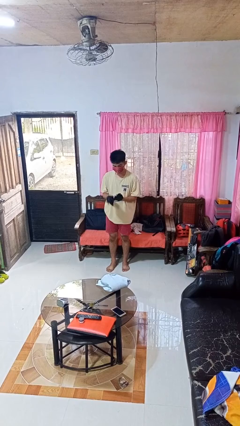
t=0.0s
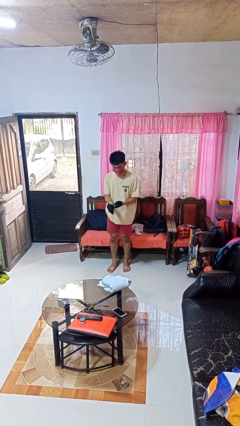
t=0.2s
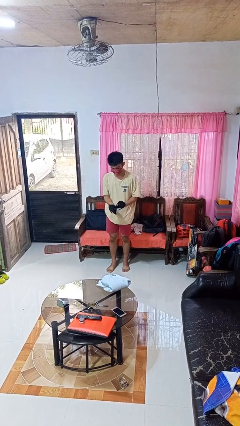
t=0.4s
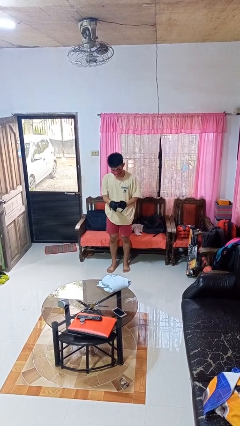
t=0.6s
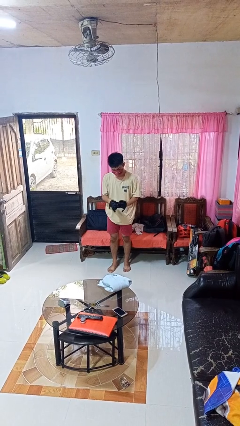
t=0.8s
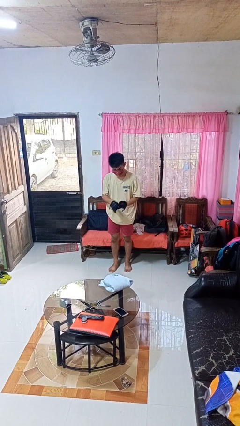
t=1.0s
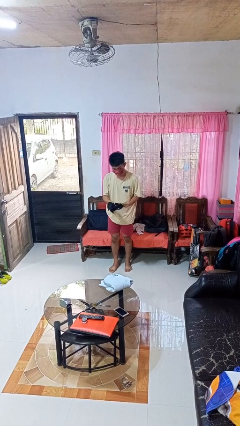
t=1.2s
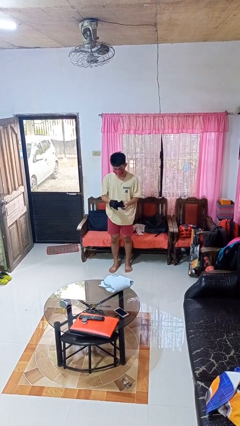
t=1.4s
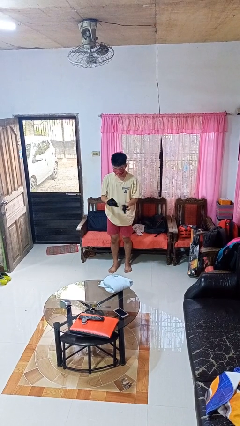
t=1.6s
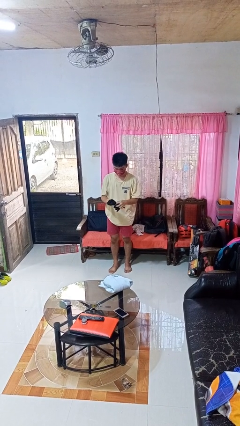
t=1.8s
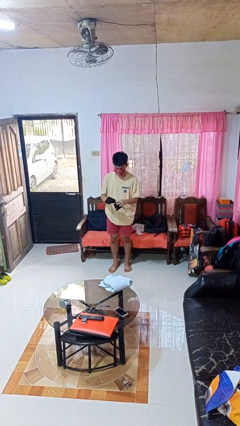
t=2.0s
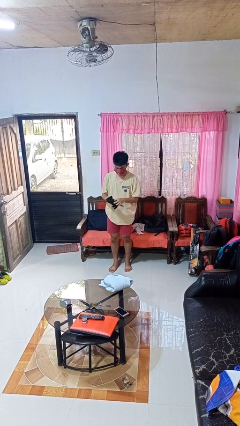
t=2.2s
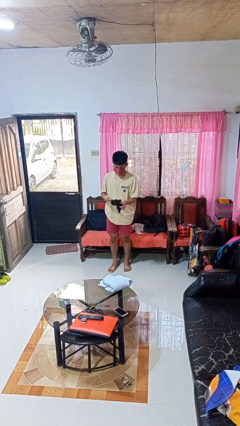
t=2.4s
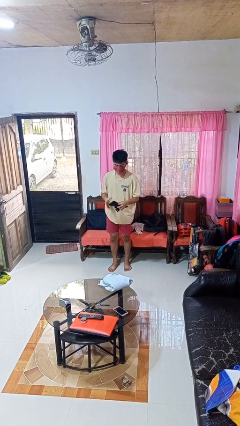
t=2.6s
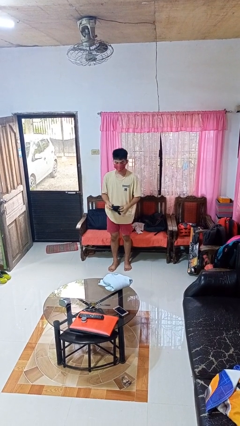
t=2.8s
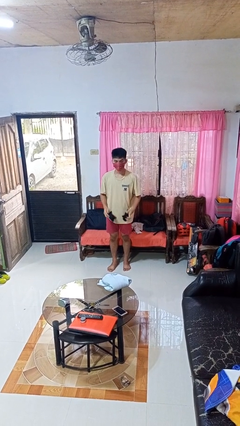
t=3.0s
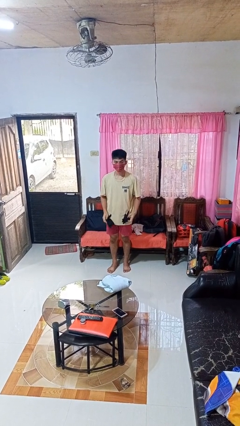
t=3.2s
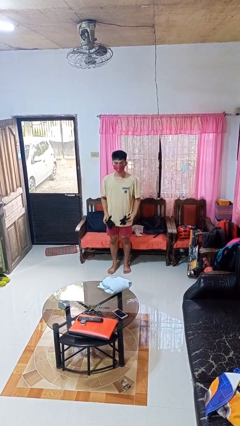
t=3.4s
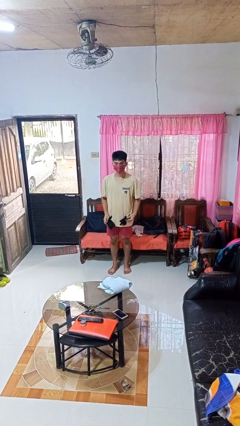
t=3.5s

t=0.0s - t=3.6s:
person takes off gloves

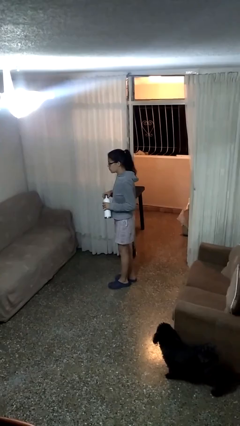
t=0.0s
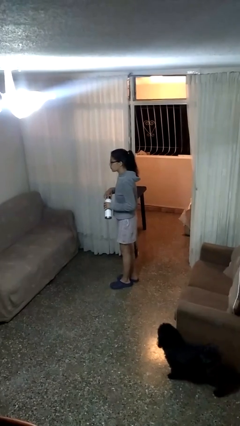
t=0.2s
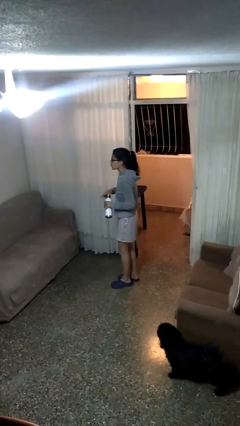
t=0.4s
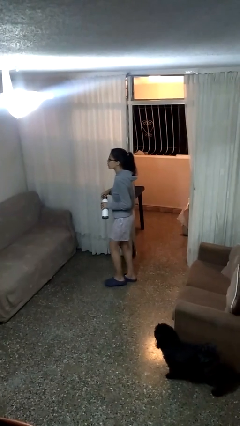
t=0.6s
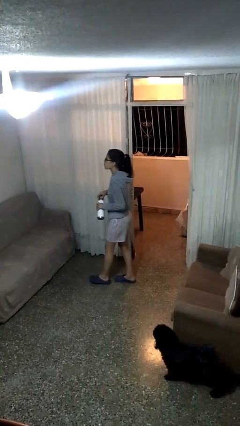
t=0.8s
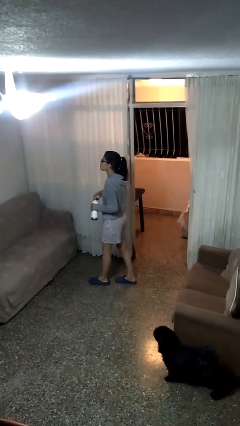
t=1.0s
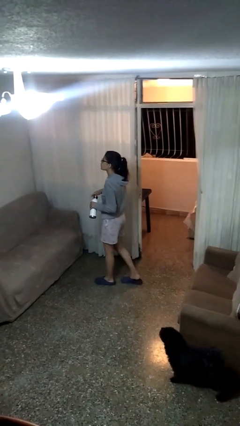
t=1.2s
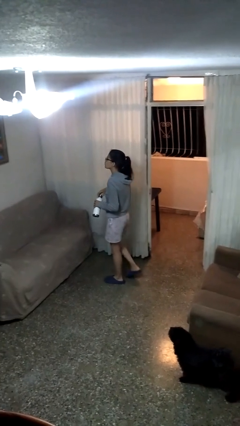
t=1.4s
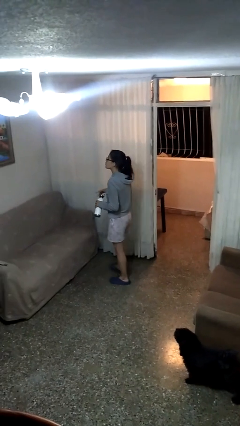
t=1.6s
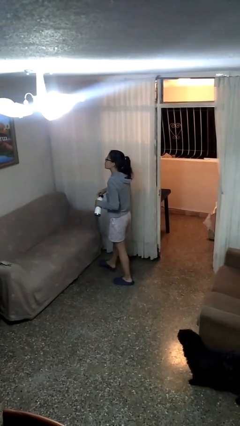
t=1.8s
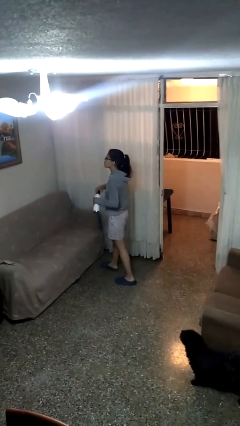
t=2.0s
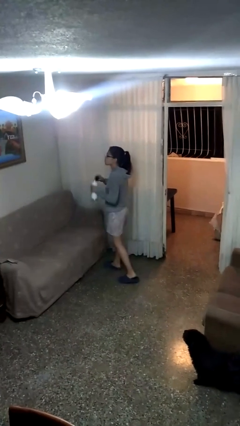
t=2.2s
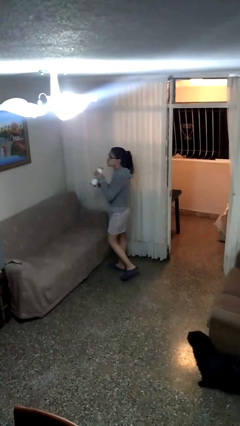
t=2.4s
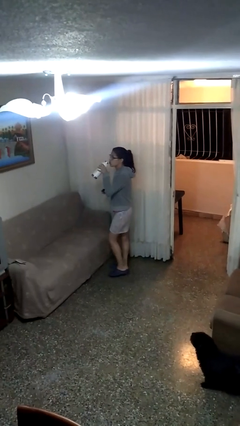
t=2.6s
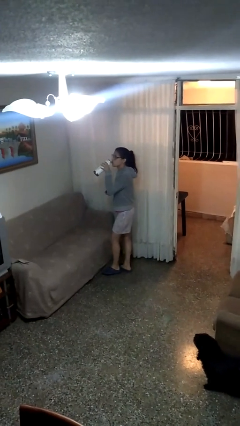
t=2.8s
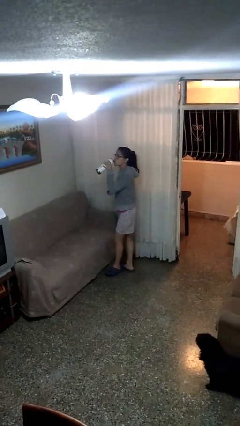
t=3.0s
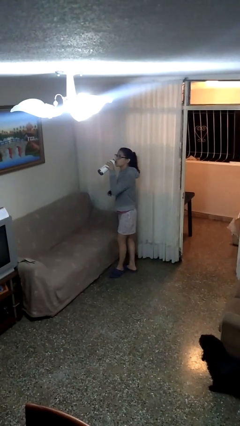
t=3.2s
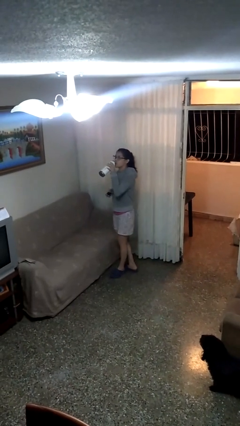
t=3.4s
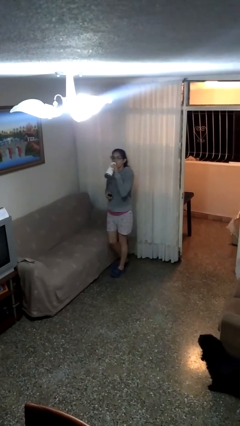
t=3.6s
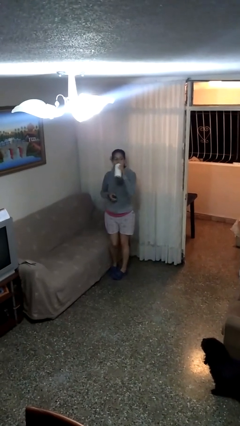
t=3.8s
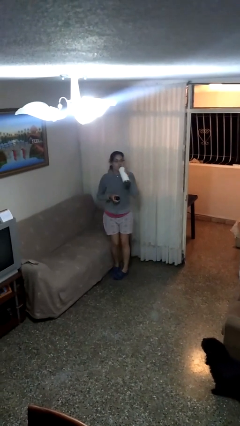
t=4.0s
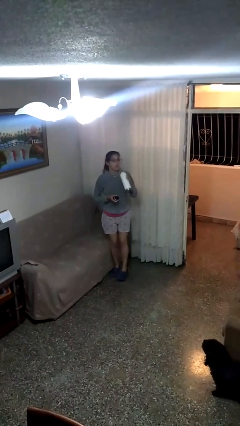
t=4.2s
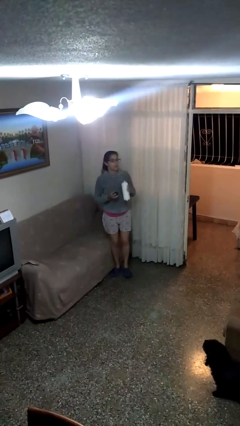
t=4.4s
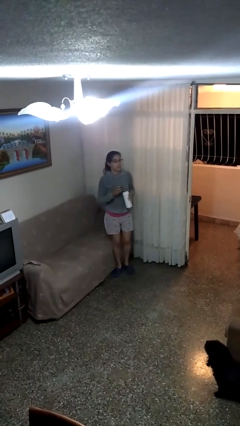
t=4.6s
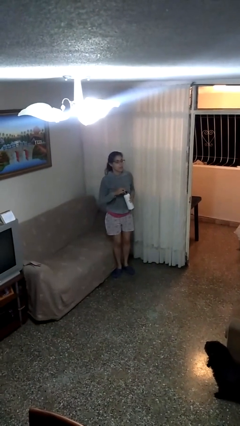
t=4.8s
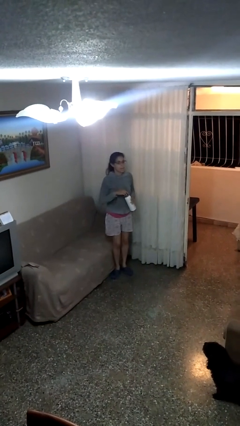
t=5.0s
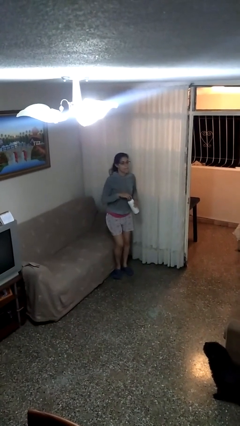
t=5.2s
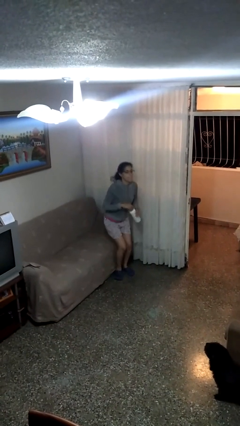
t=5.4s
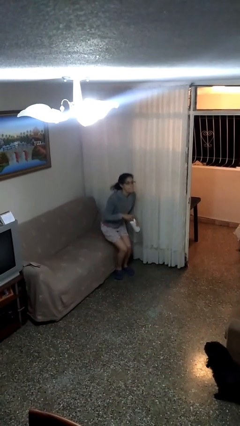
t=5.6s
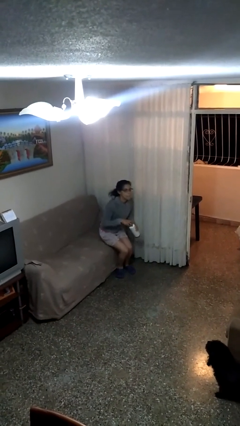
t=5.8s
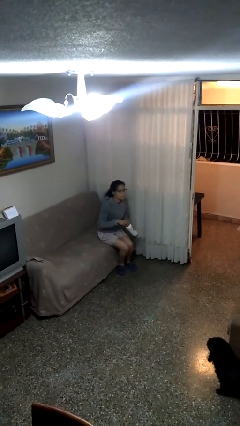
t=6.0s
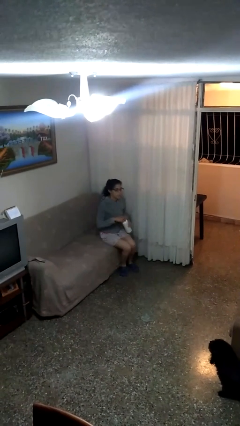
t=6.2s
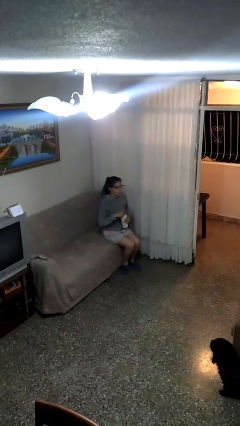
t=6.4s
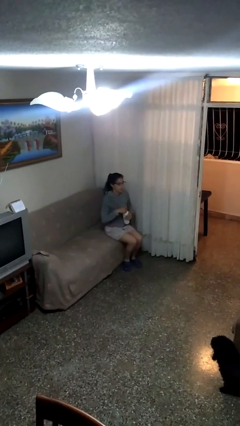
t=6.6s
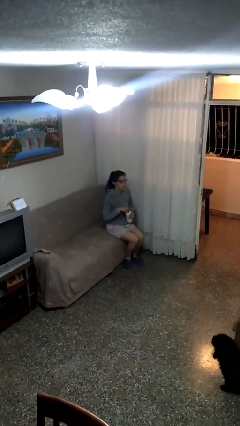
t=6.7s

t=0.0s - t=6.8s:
person drinks from bottle

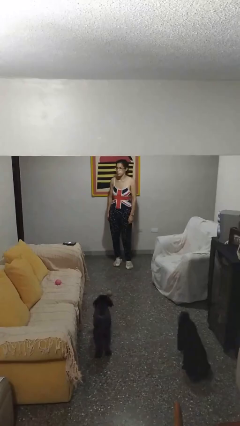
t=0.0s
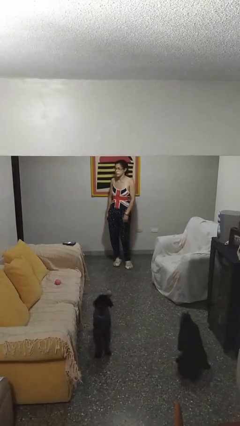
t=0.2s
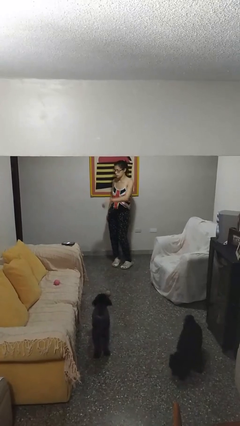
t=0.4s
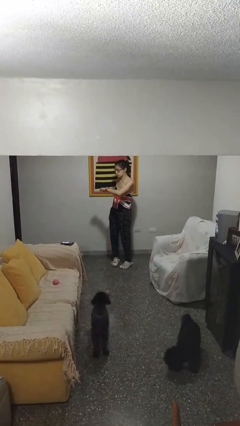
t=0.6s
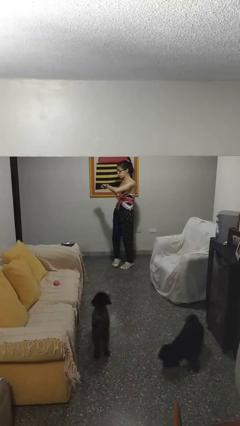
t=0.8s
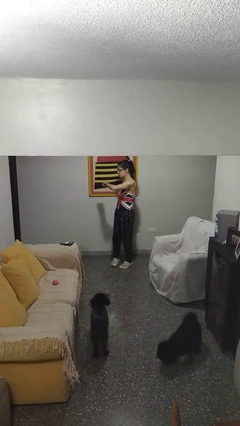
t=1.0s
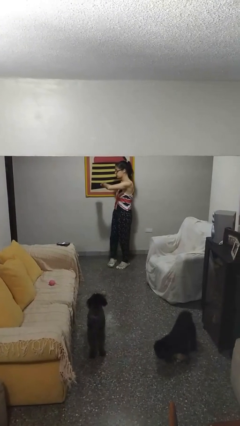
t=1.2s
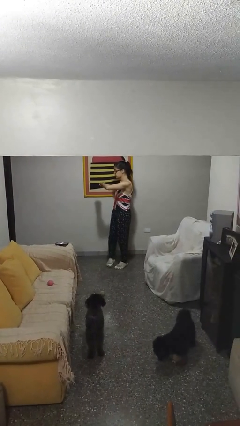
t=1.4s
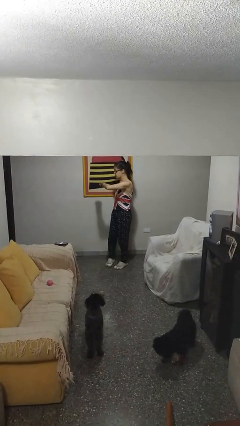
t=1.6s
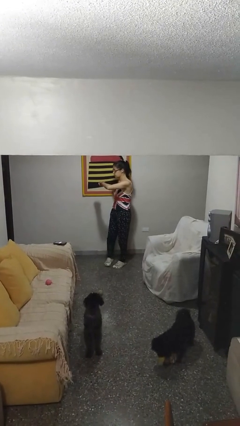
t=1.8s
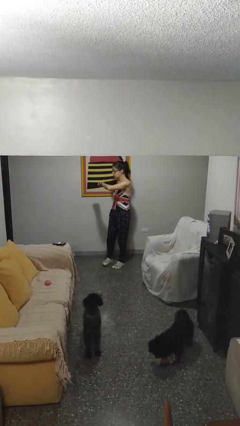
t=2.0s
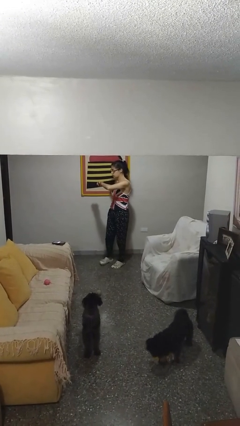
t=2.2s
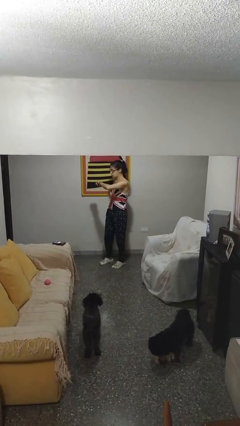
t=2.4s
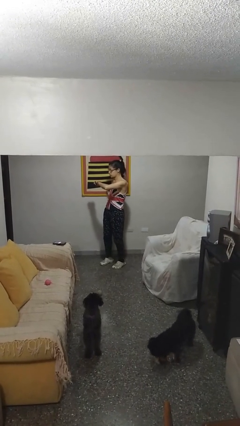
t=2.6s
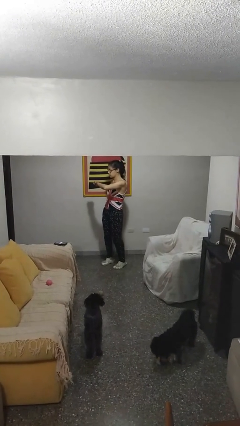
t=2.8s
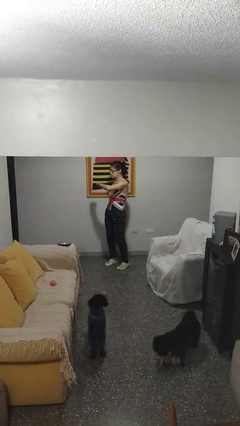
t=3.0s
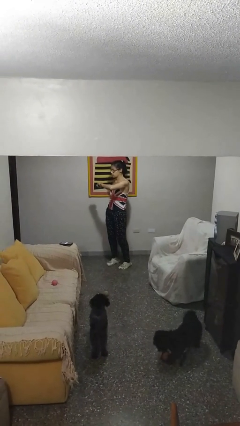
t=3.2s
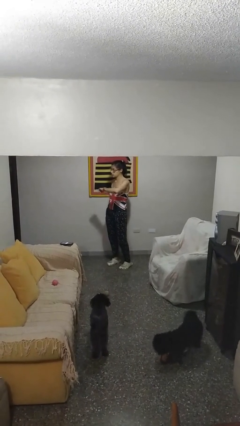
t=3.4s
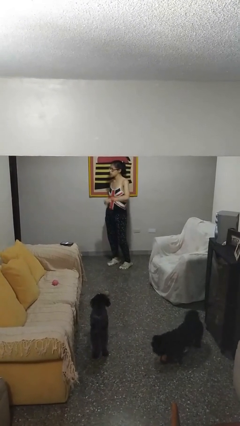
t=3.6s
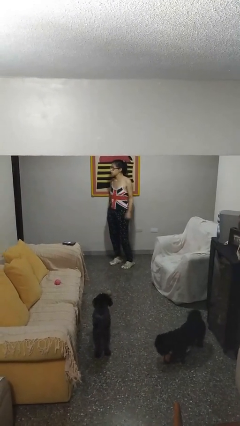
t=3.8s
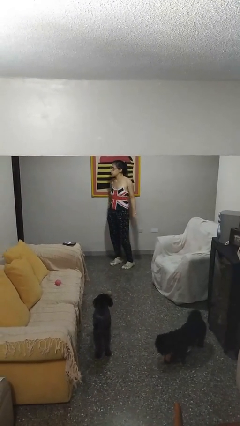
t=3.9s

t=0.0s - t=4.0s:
person looks at wristwatch

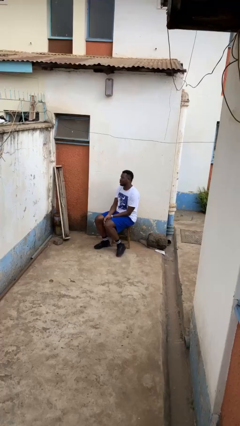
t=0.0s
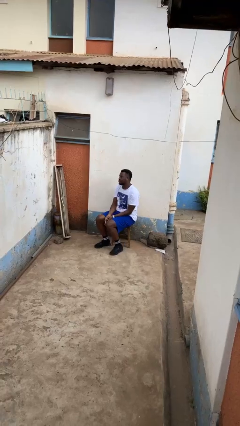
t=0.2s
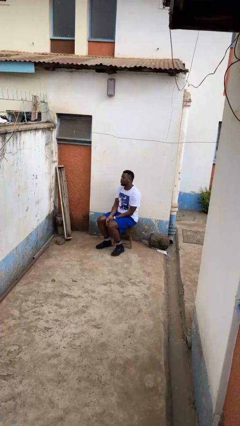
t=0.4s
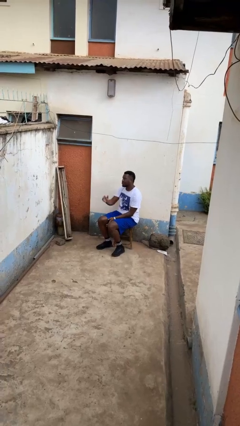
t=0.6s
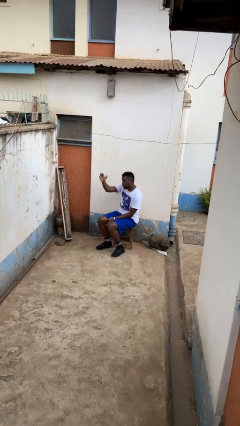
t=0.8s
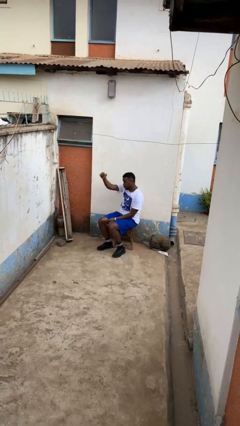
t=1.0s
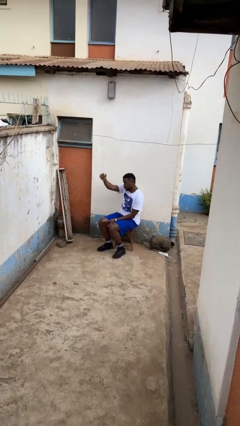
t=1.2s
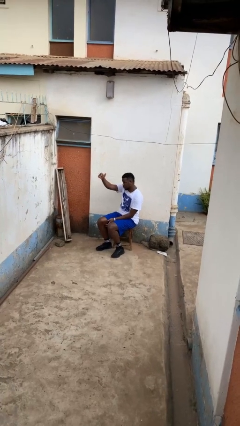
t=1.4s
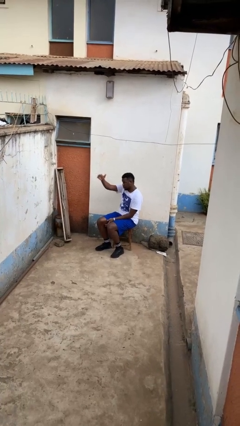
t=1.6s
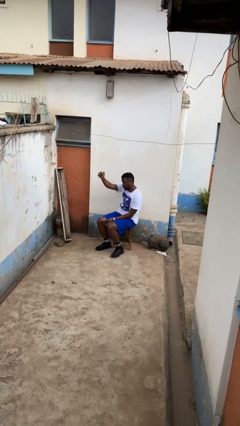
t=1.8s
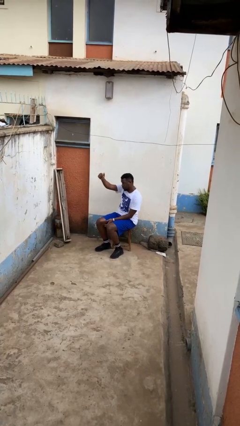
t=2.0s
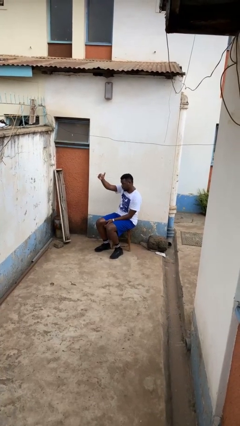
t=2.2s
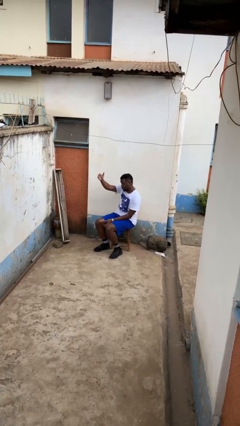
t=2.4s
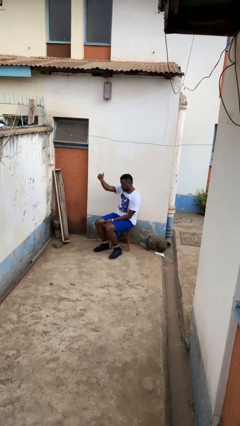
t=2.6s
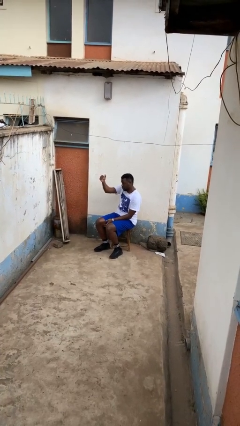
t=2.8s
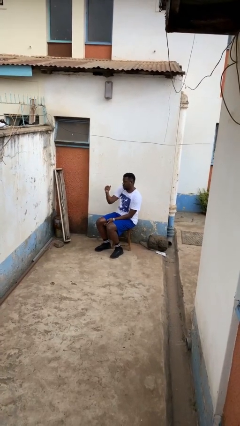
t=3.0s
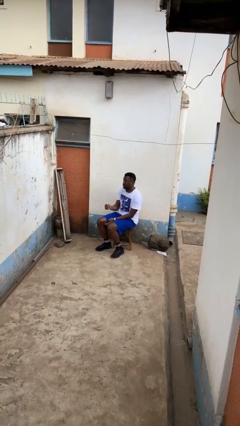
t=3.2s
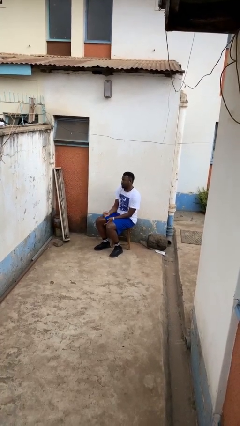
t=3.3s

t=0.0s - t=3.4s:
person gestures come here
